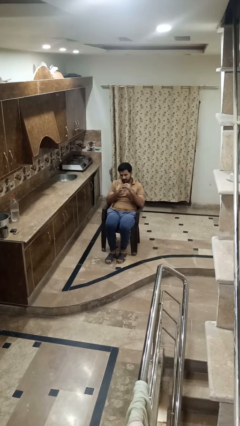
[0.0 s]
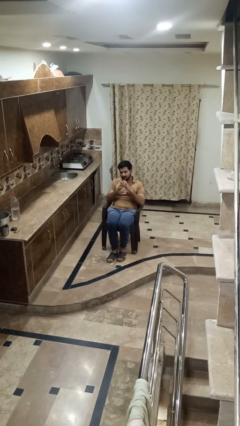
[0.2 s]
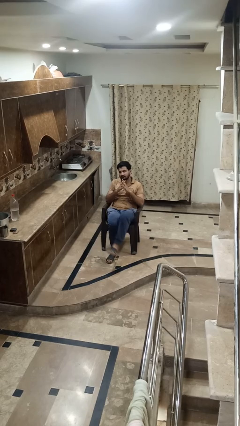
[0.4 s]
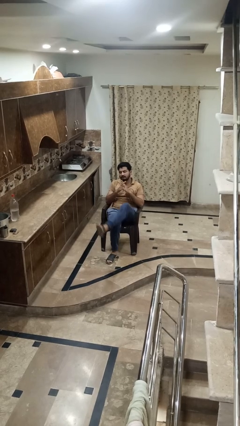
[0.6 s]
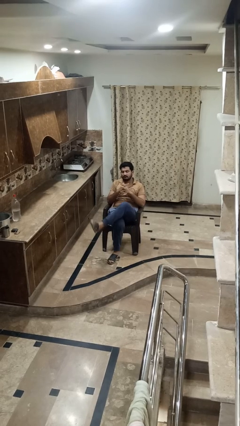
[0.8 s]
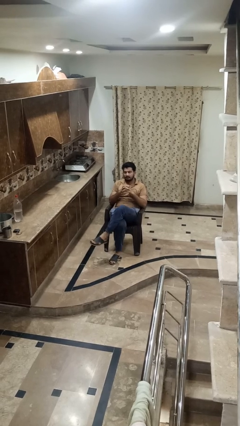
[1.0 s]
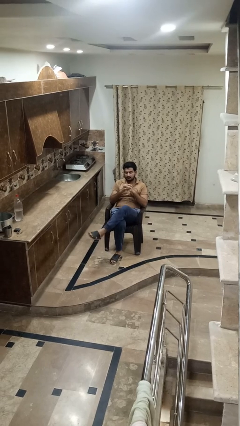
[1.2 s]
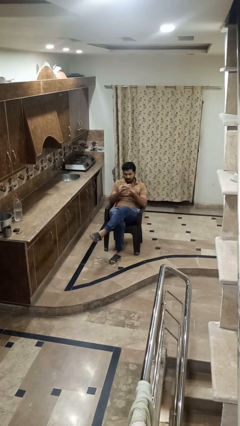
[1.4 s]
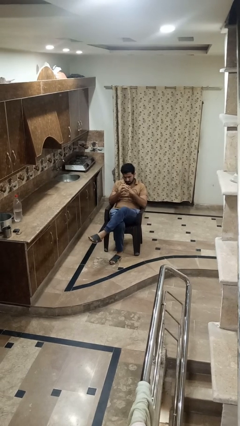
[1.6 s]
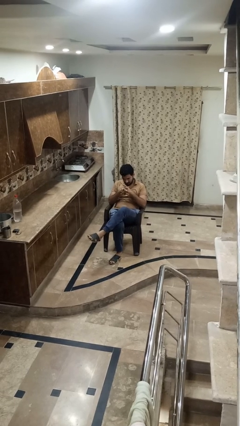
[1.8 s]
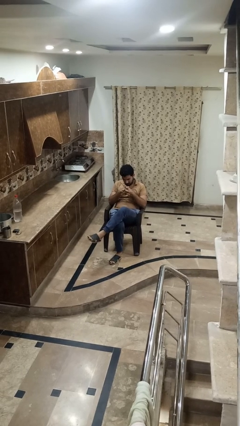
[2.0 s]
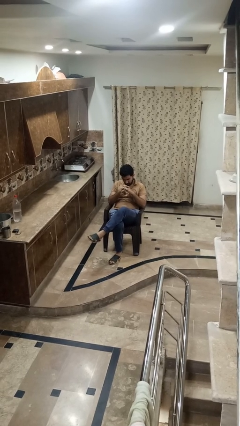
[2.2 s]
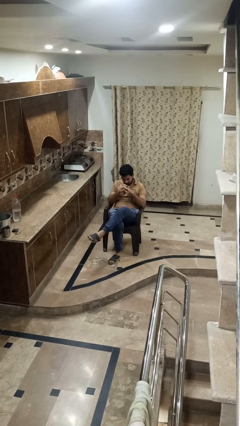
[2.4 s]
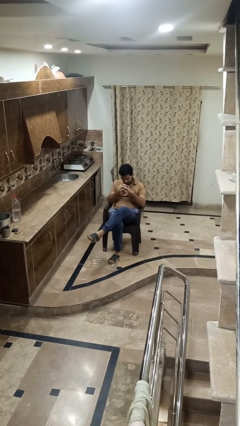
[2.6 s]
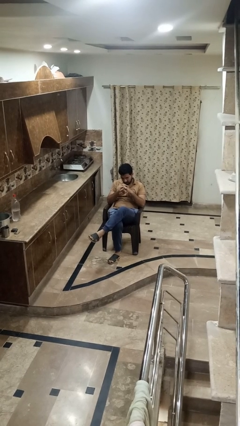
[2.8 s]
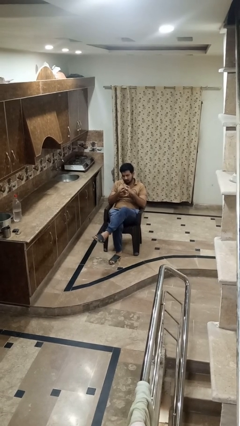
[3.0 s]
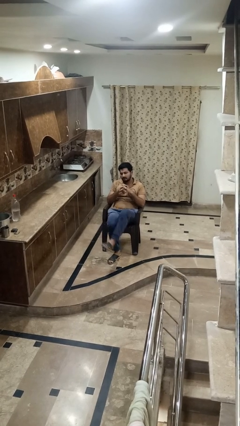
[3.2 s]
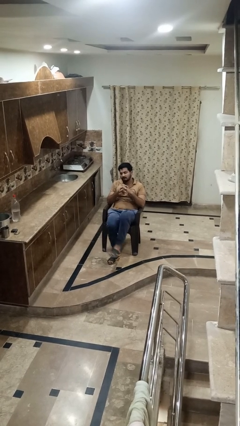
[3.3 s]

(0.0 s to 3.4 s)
person crosses legs

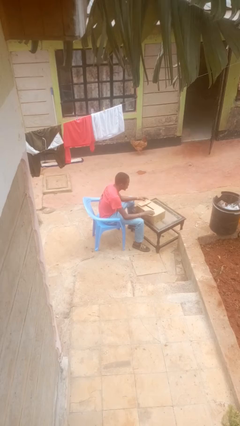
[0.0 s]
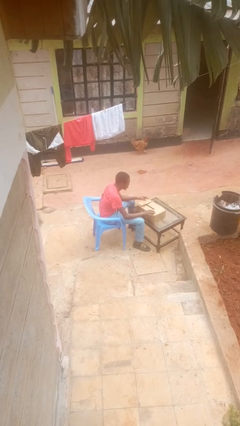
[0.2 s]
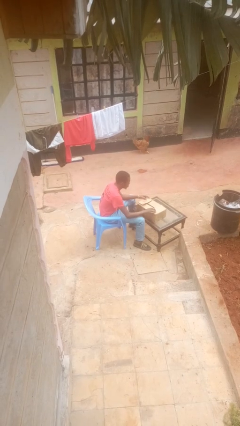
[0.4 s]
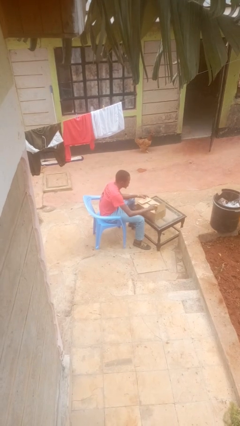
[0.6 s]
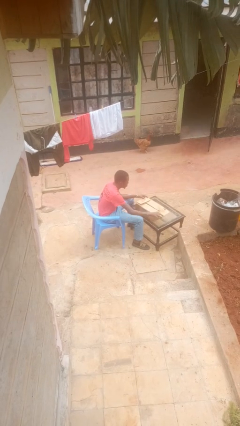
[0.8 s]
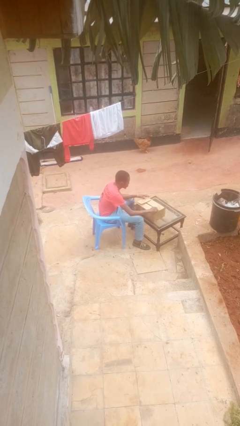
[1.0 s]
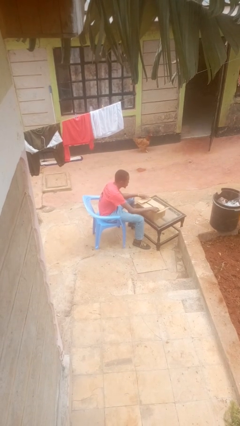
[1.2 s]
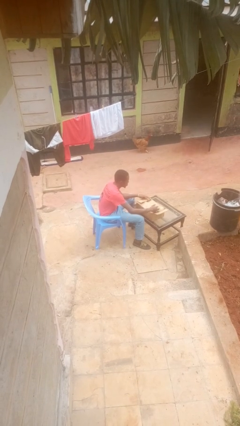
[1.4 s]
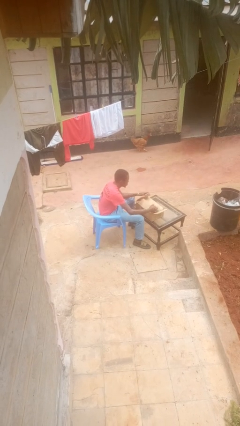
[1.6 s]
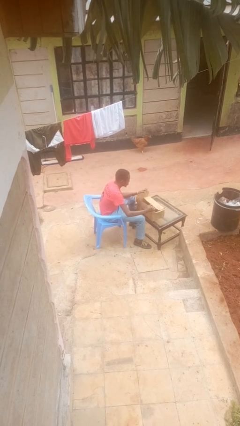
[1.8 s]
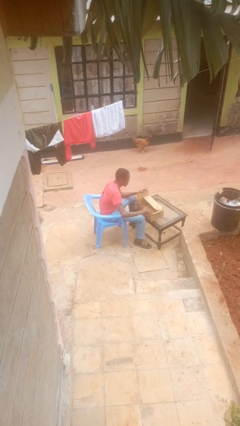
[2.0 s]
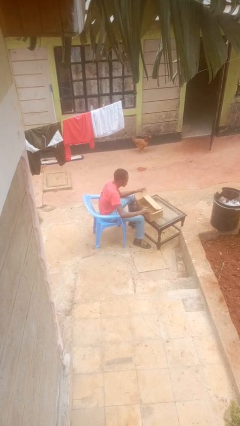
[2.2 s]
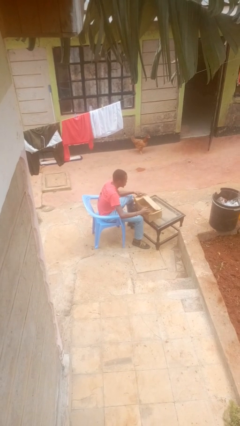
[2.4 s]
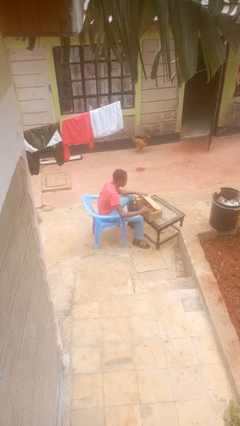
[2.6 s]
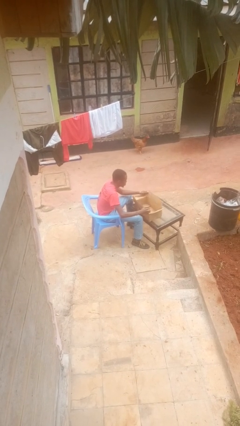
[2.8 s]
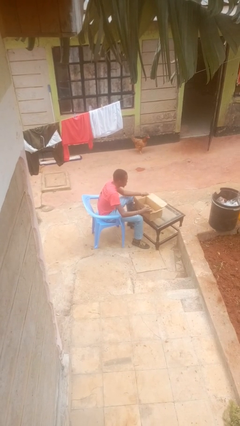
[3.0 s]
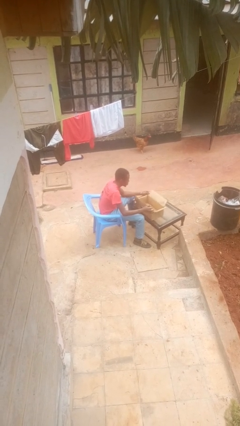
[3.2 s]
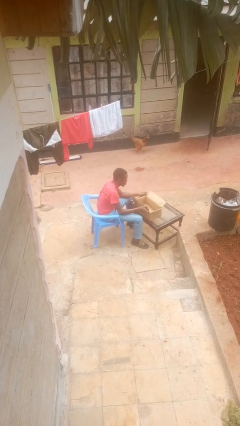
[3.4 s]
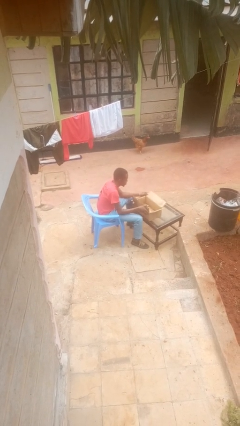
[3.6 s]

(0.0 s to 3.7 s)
person opens box

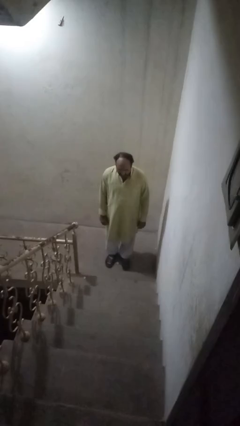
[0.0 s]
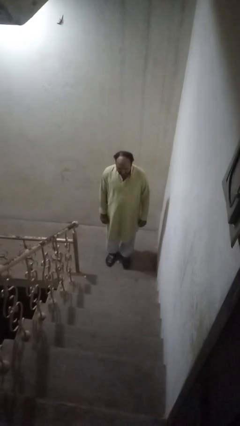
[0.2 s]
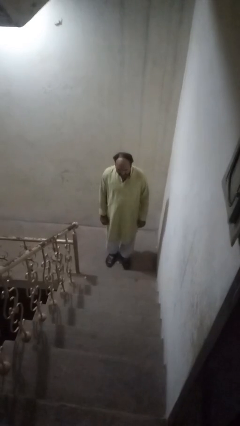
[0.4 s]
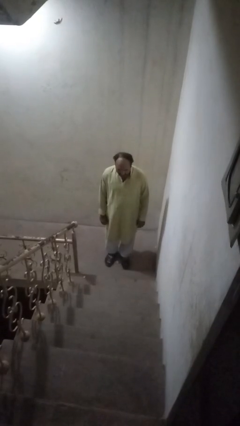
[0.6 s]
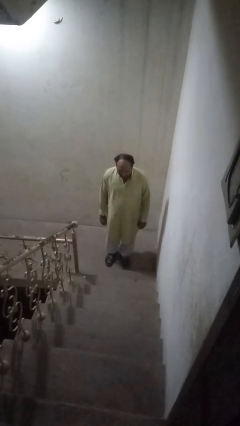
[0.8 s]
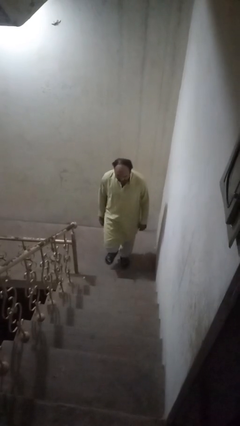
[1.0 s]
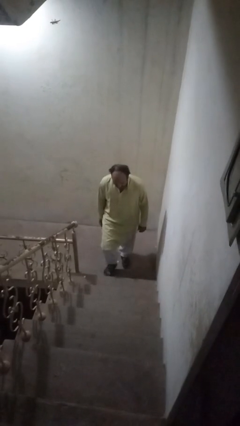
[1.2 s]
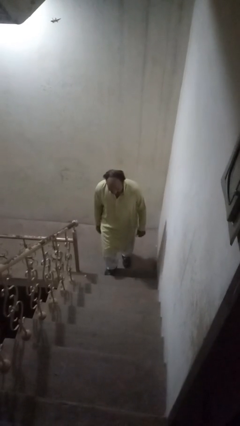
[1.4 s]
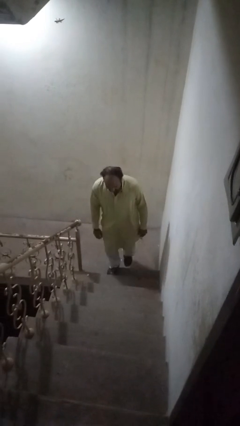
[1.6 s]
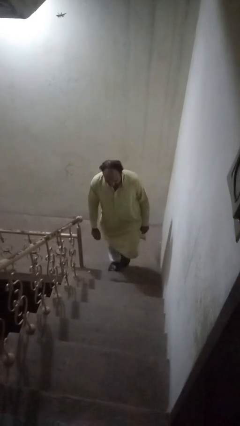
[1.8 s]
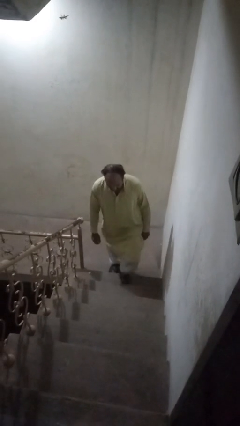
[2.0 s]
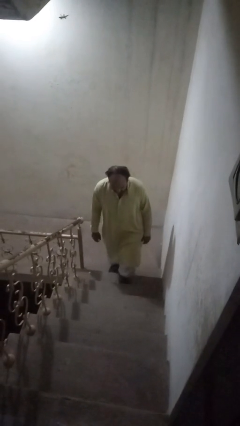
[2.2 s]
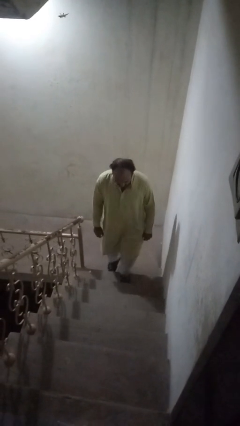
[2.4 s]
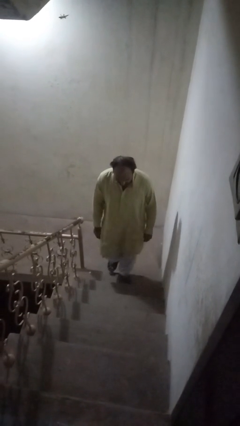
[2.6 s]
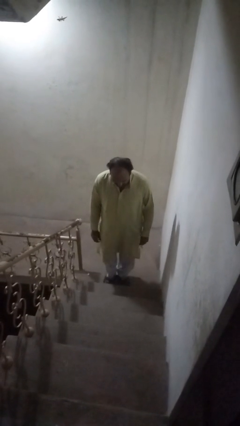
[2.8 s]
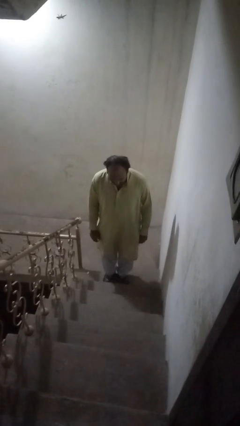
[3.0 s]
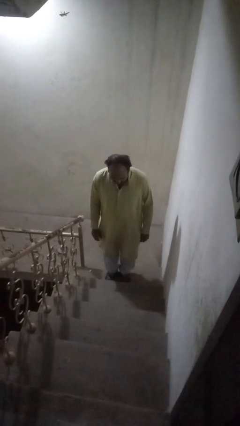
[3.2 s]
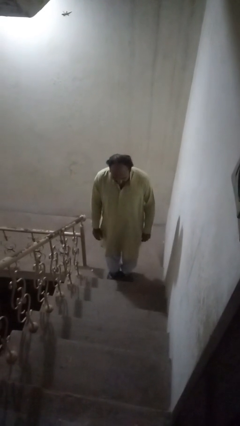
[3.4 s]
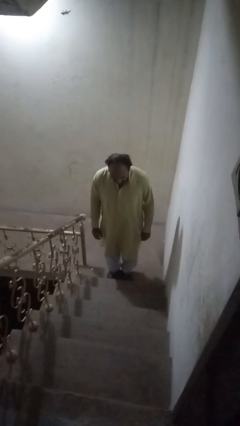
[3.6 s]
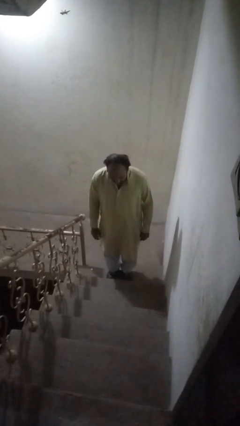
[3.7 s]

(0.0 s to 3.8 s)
person climbs up ladder

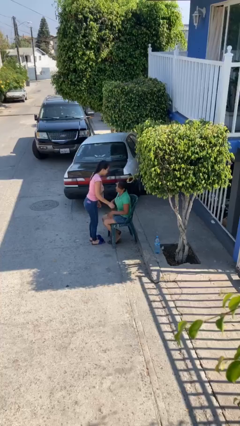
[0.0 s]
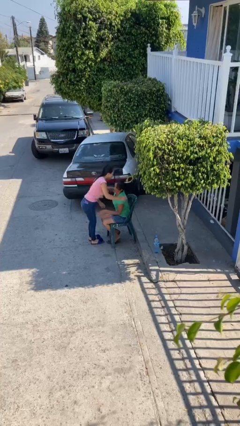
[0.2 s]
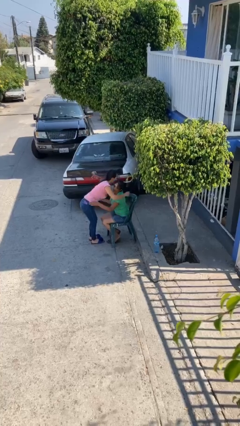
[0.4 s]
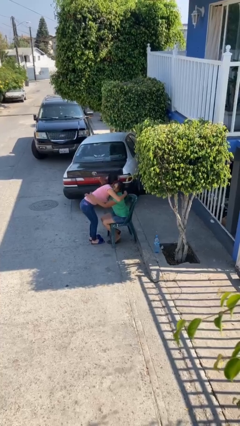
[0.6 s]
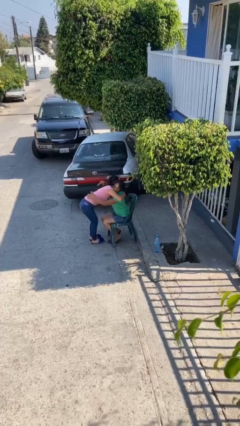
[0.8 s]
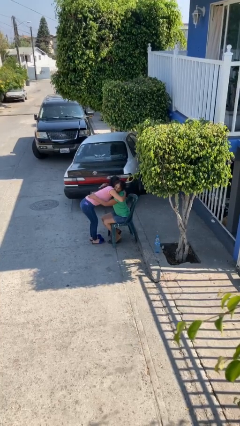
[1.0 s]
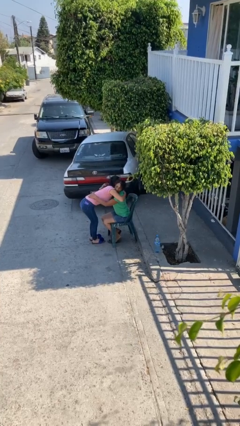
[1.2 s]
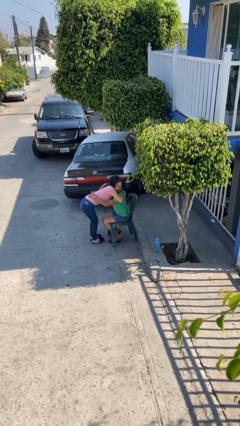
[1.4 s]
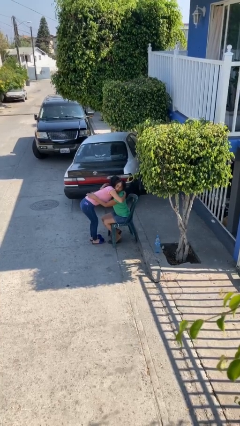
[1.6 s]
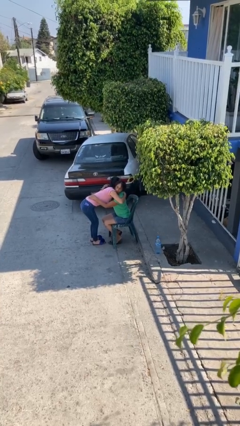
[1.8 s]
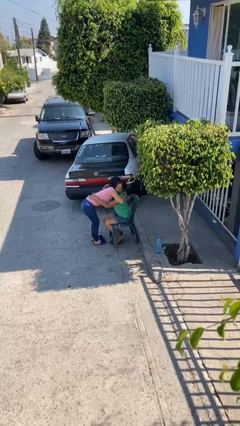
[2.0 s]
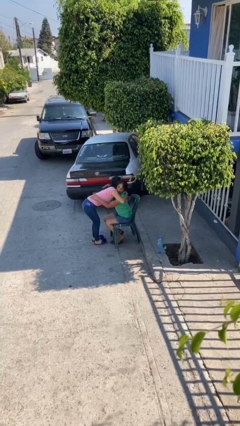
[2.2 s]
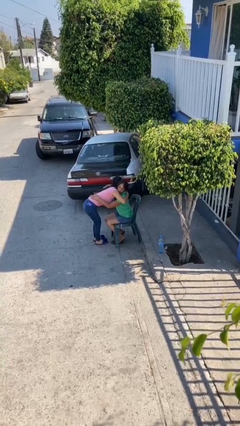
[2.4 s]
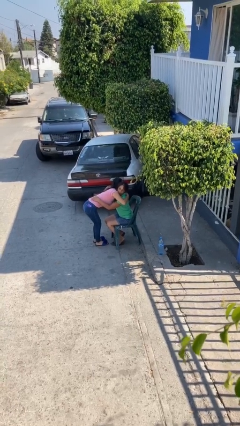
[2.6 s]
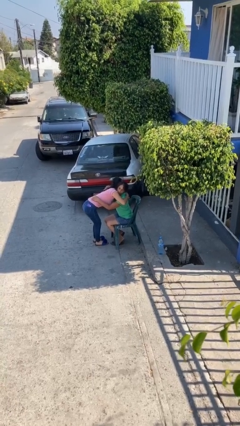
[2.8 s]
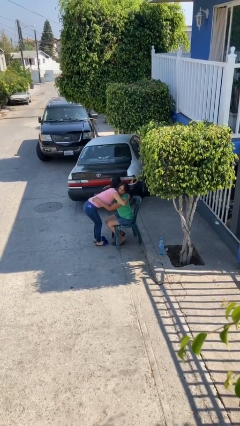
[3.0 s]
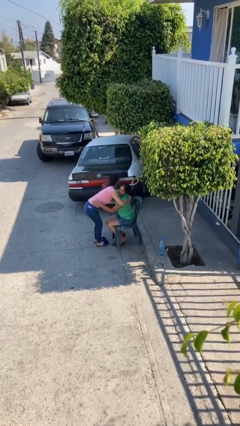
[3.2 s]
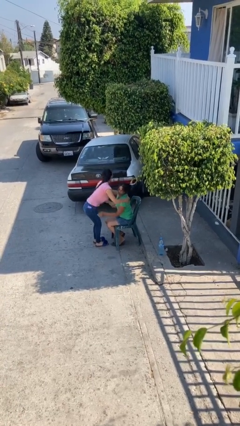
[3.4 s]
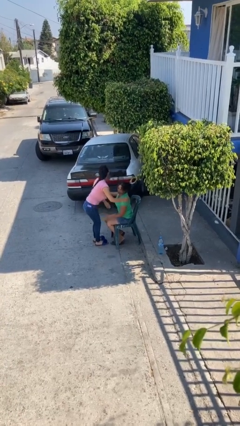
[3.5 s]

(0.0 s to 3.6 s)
person embraces person

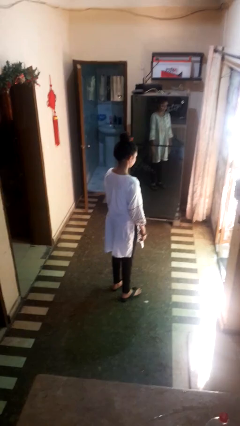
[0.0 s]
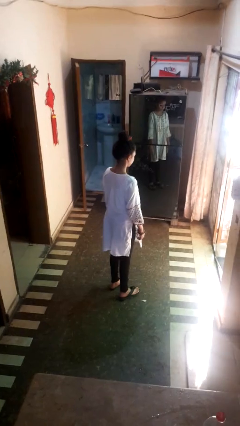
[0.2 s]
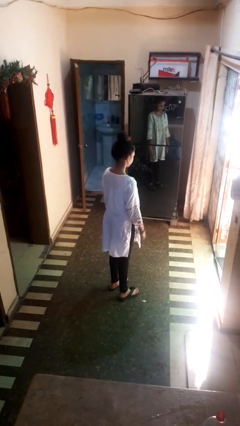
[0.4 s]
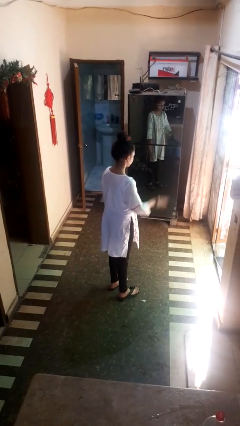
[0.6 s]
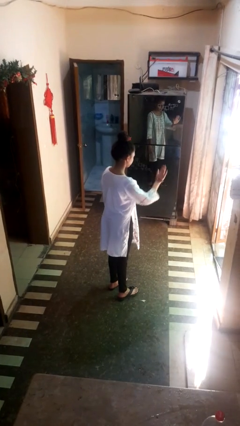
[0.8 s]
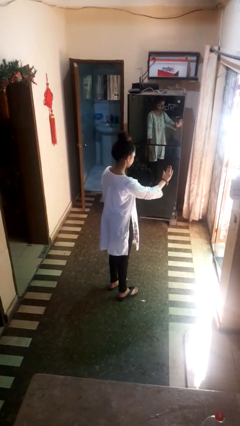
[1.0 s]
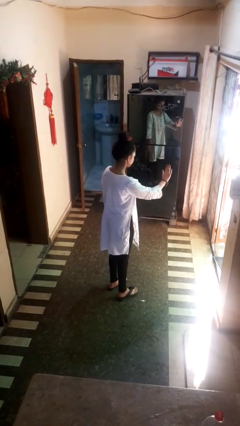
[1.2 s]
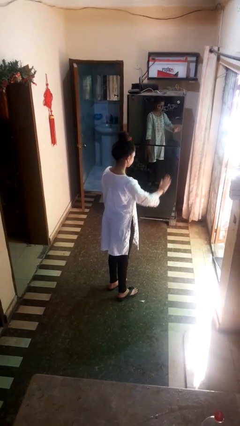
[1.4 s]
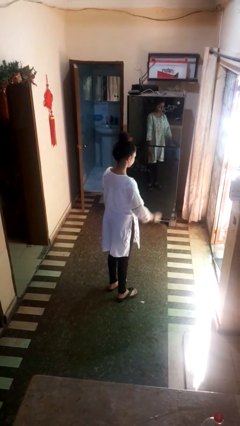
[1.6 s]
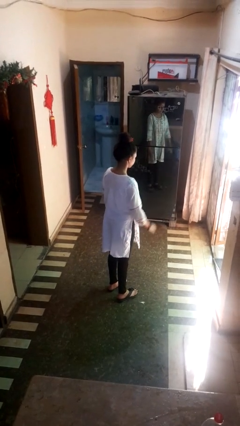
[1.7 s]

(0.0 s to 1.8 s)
person gestures stop

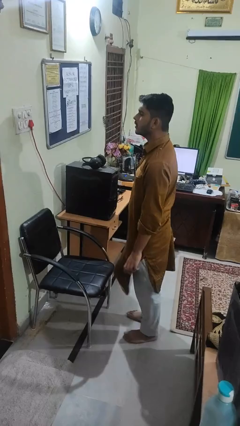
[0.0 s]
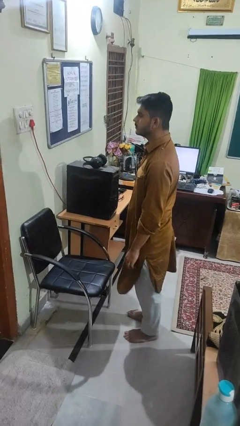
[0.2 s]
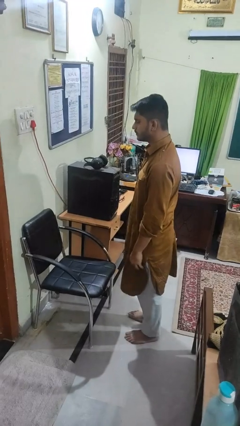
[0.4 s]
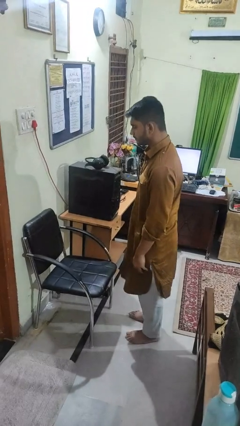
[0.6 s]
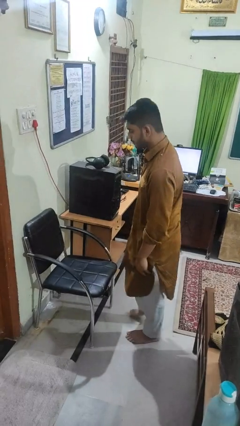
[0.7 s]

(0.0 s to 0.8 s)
person climbs on chair

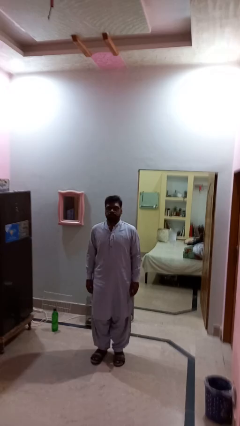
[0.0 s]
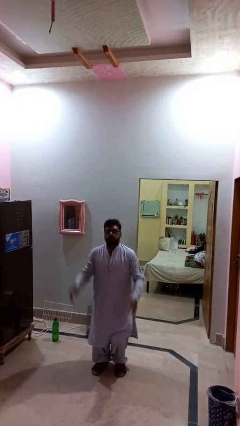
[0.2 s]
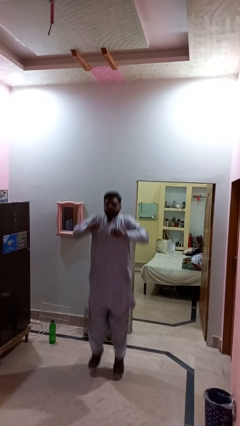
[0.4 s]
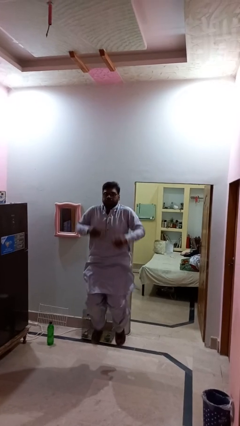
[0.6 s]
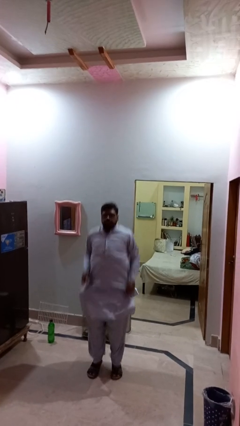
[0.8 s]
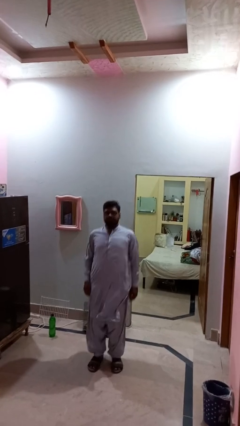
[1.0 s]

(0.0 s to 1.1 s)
person jumps
